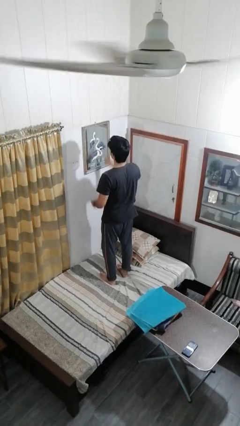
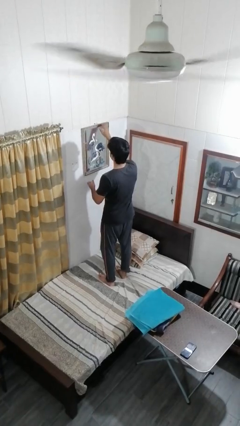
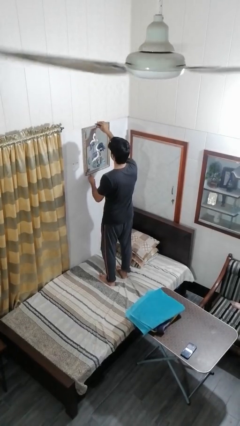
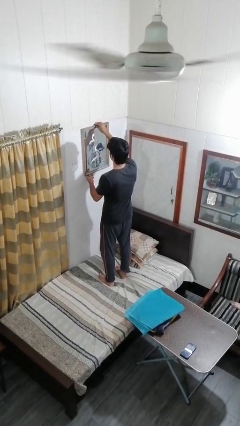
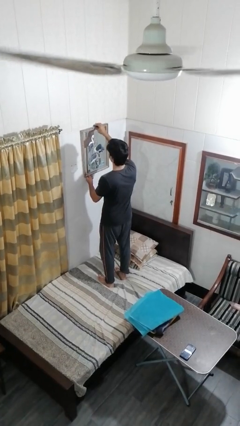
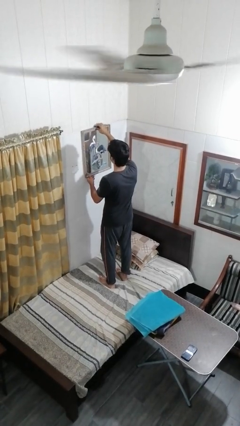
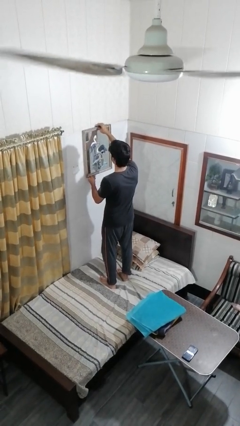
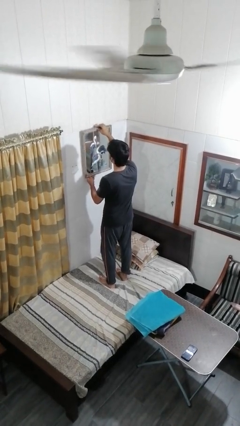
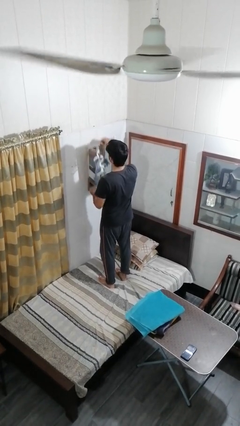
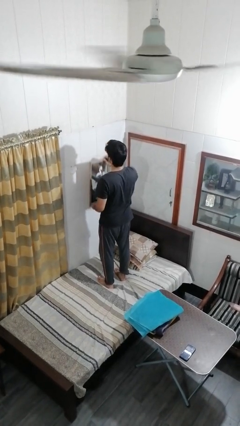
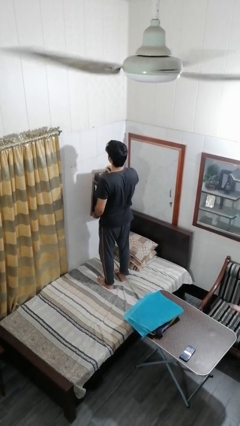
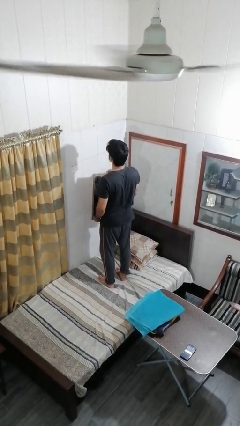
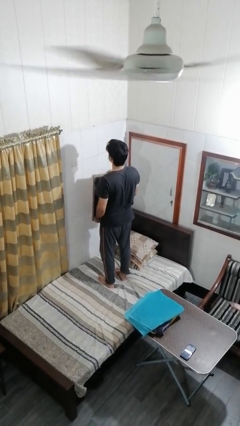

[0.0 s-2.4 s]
person takes down picture frame

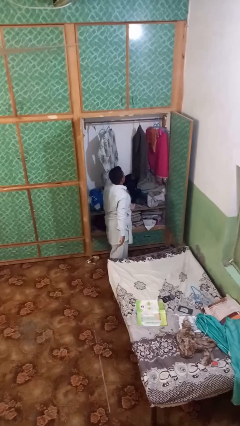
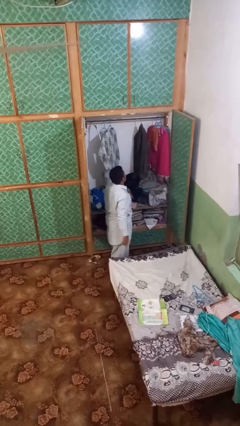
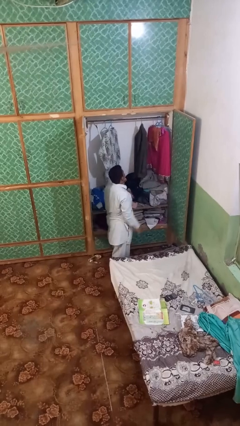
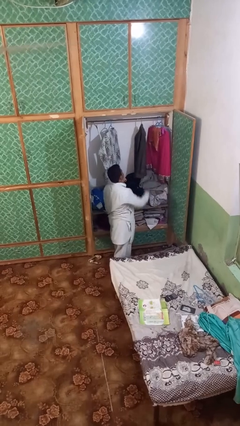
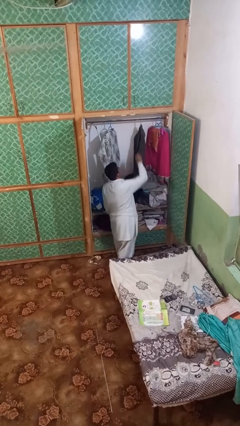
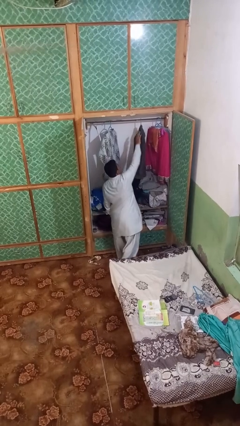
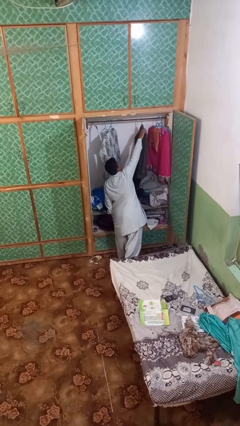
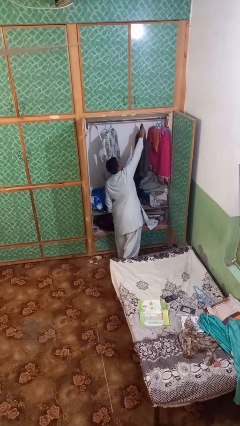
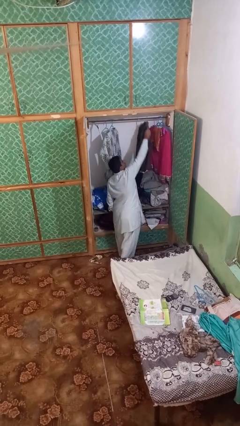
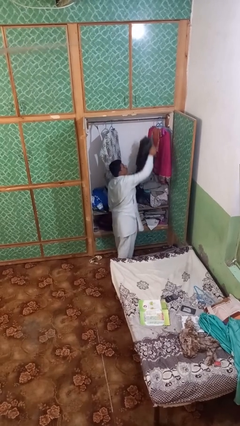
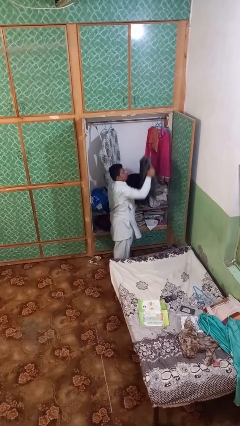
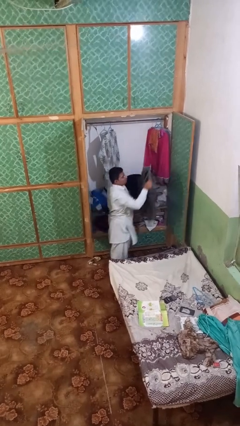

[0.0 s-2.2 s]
person takes clothes from closet

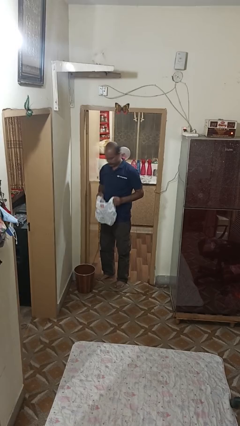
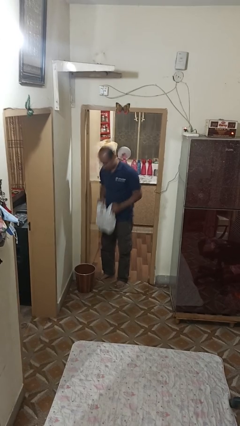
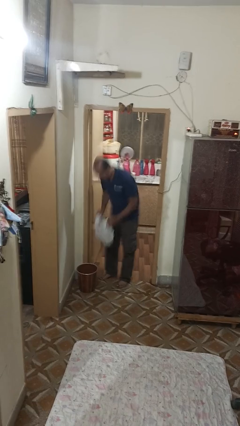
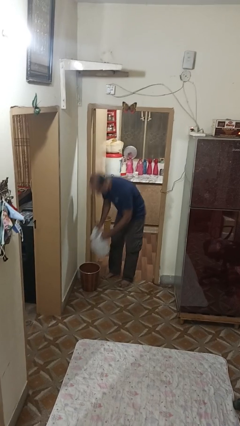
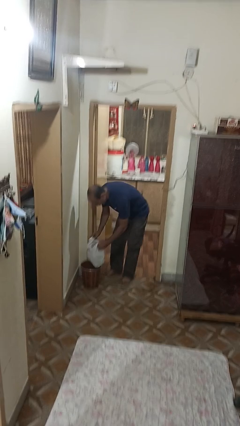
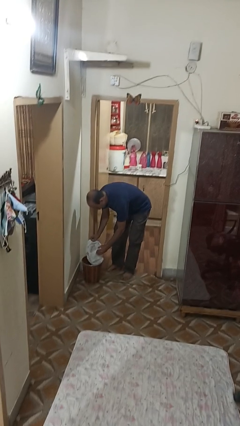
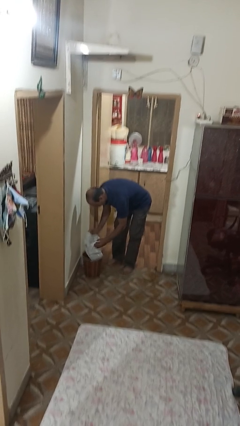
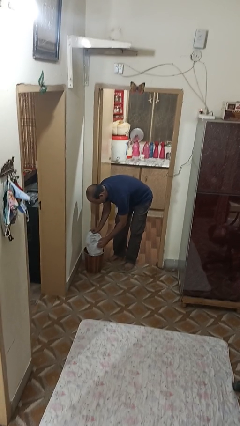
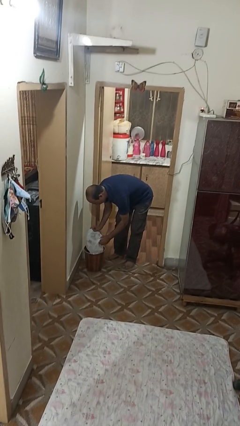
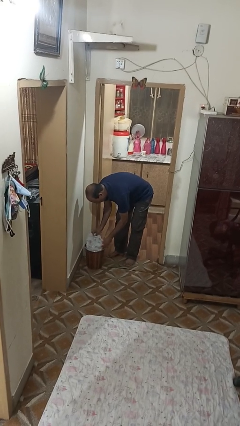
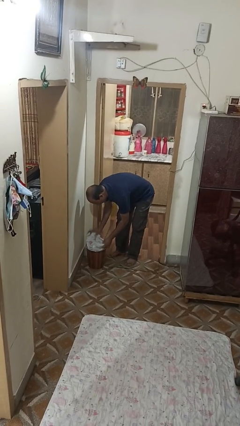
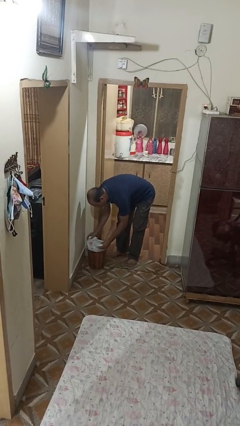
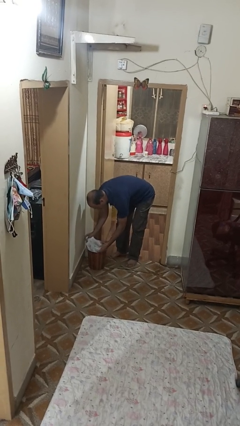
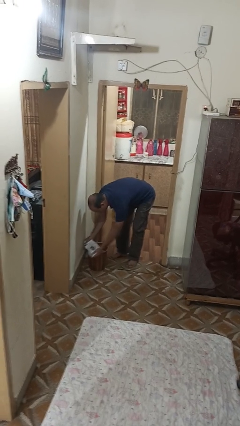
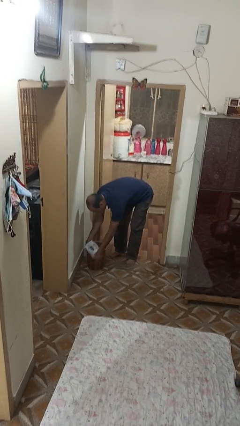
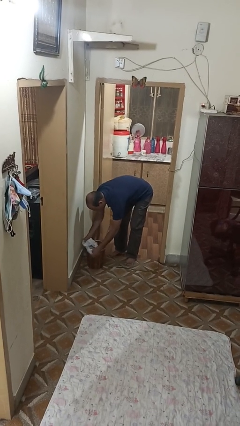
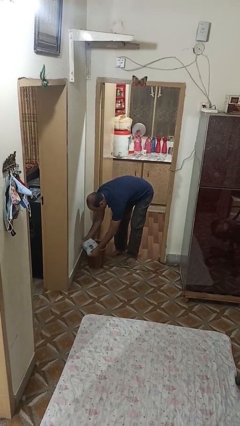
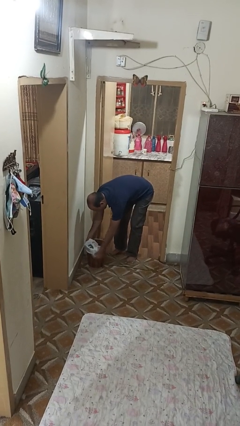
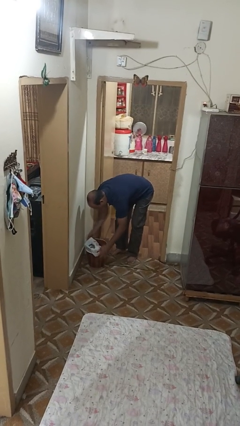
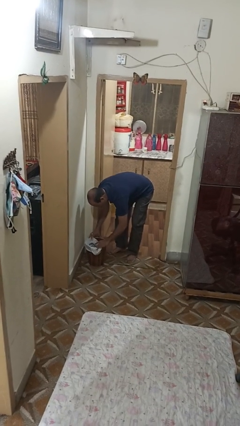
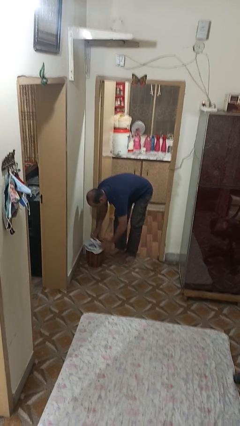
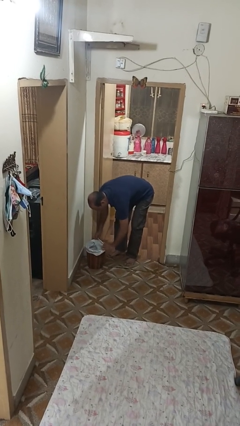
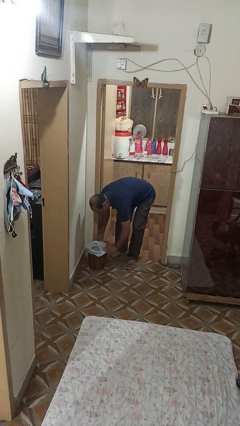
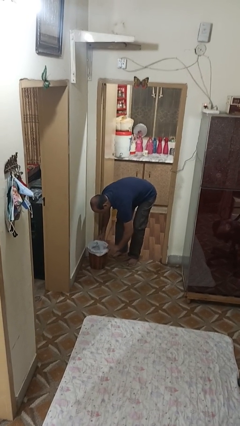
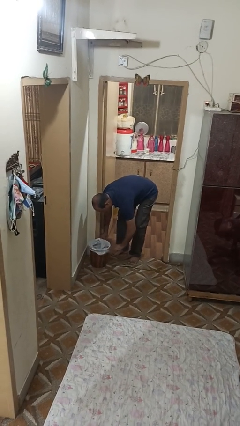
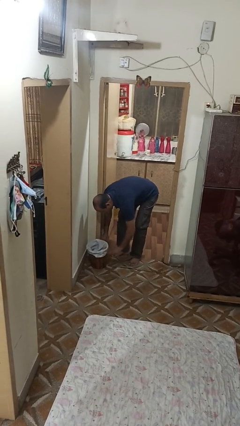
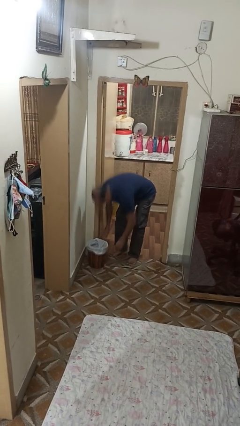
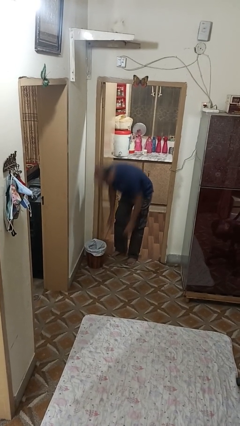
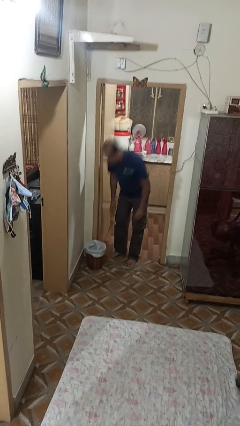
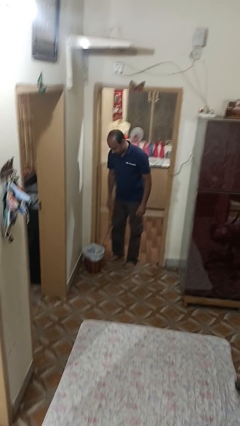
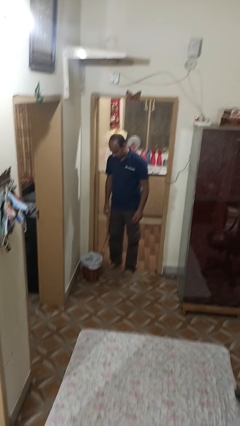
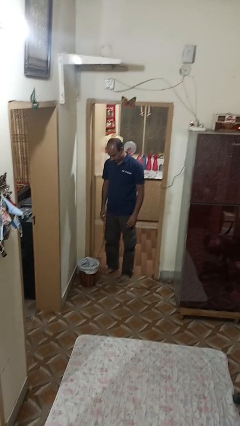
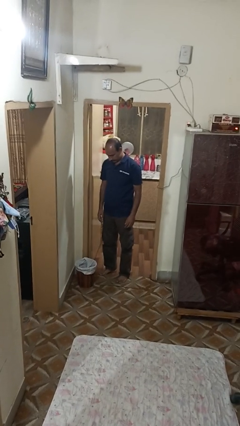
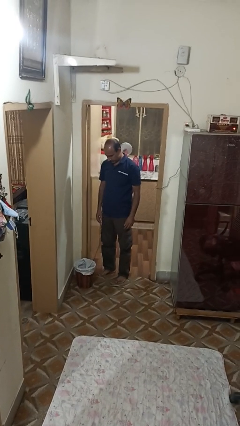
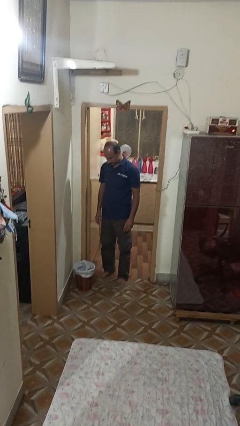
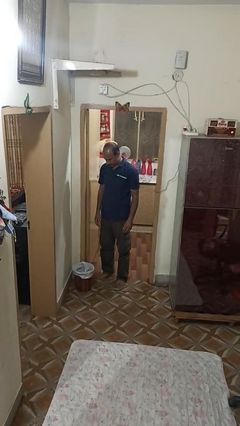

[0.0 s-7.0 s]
person inserts trashbag into trashcan

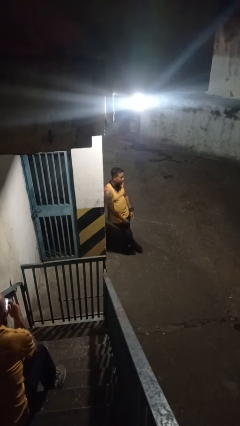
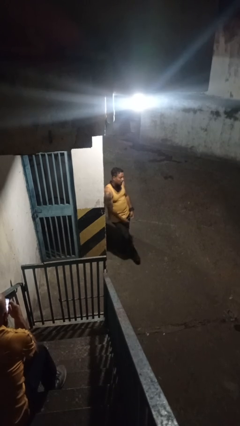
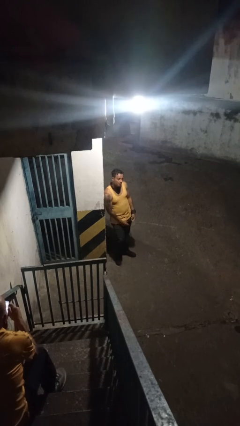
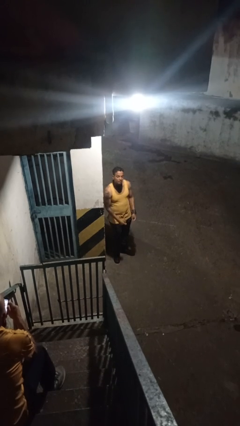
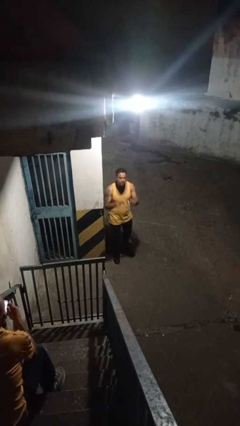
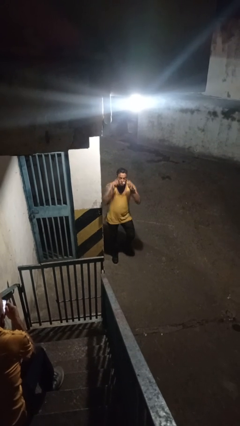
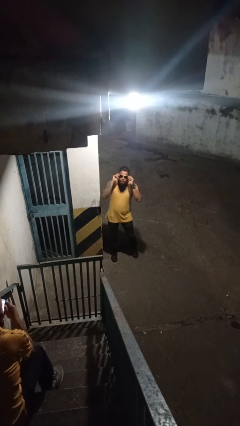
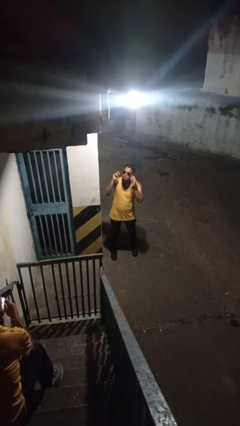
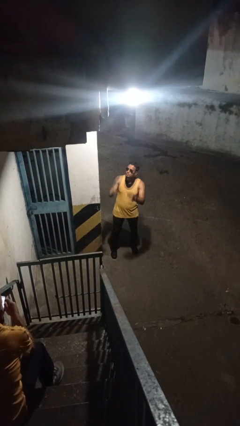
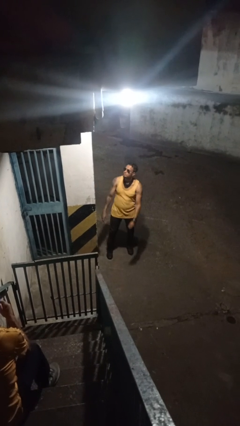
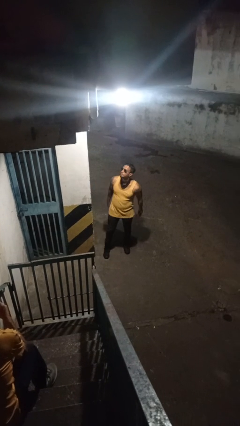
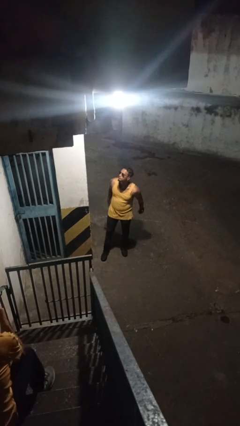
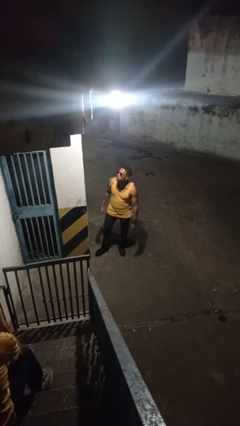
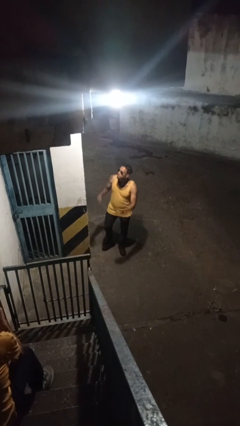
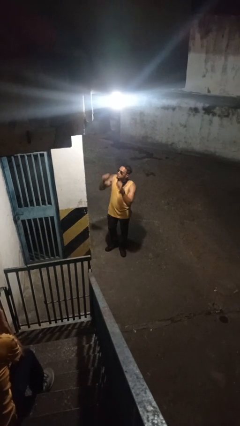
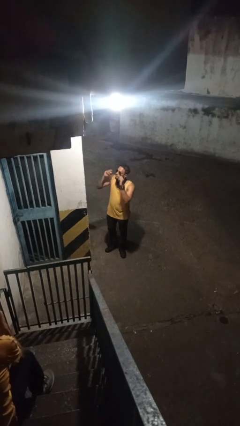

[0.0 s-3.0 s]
person puts on sunglasses

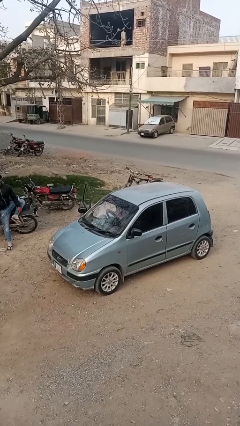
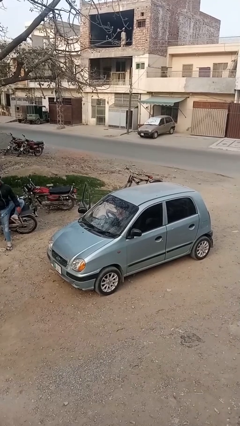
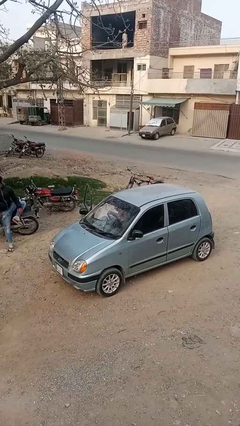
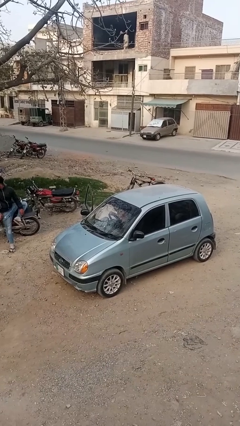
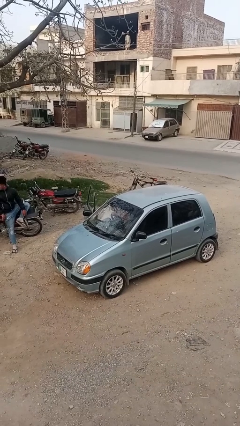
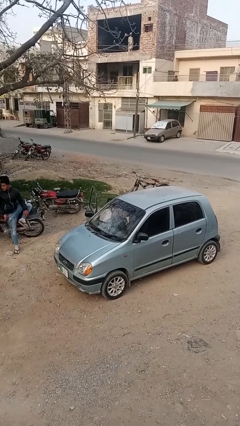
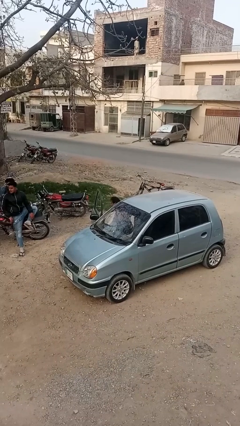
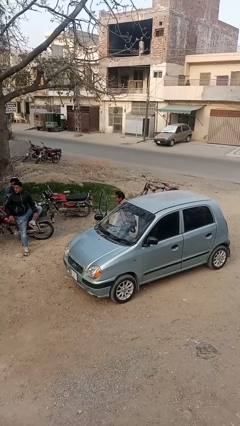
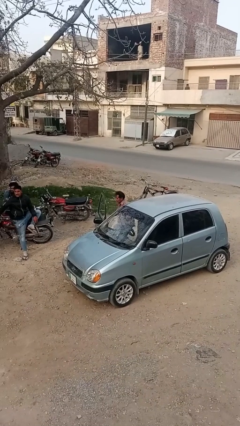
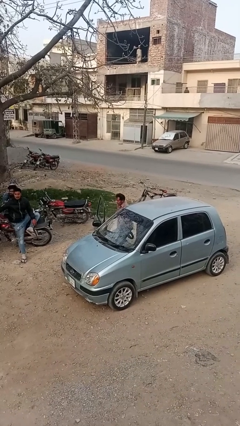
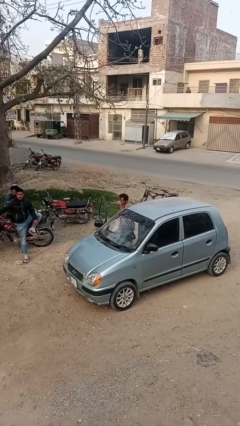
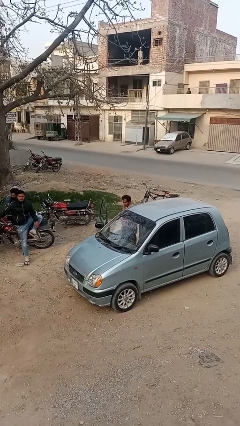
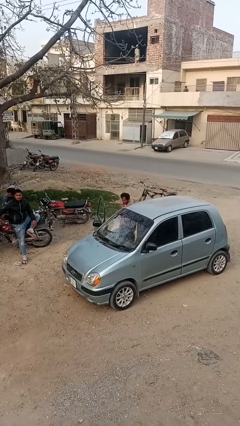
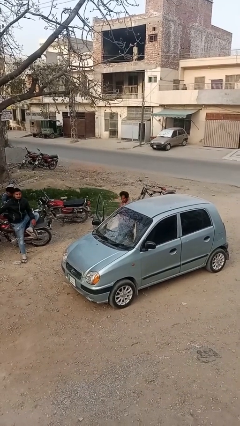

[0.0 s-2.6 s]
person exits car

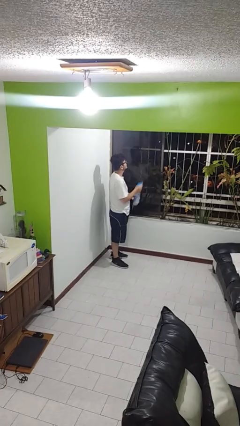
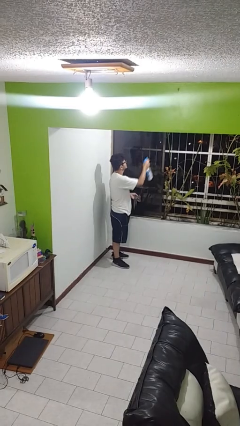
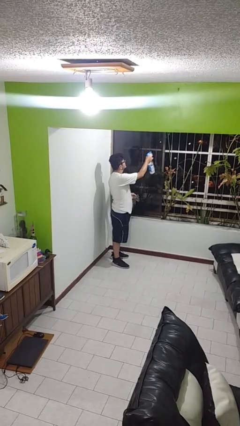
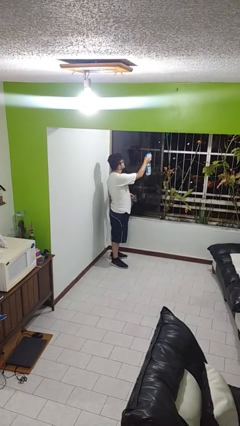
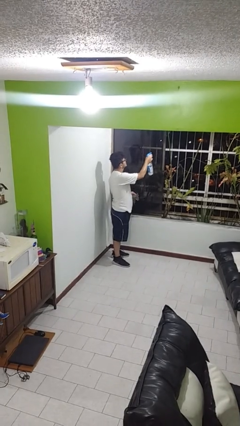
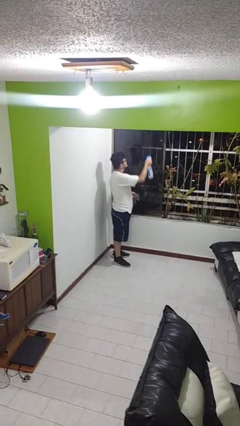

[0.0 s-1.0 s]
person sprays from bottle
